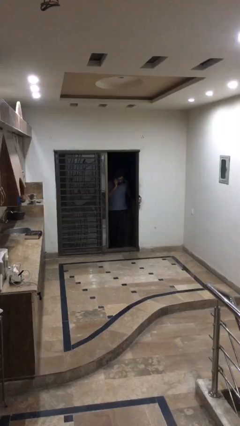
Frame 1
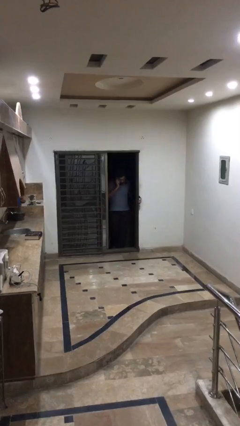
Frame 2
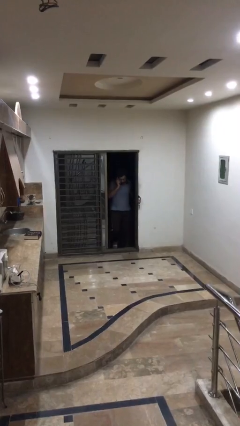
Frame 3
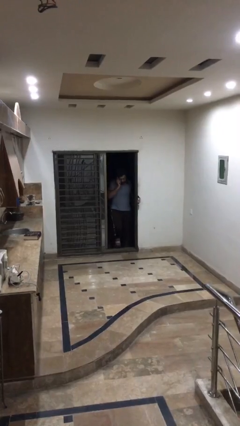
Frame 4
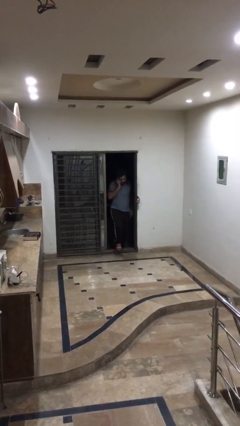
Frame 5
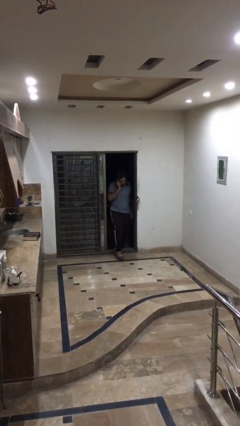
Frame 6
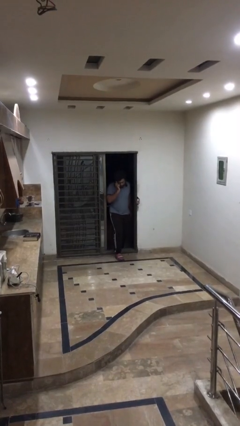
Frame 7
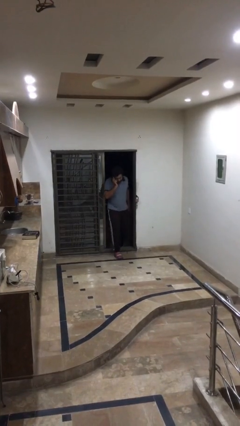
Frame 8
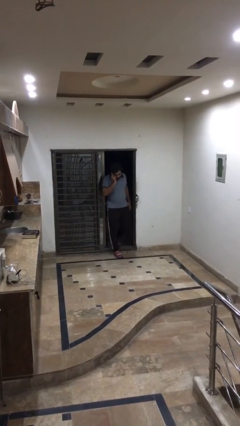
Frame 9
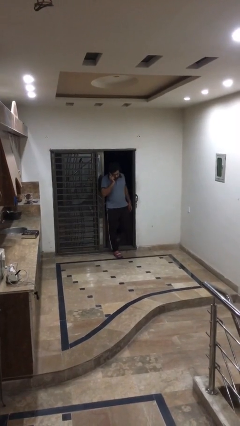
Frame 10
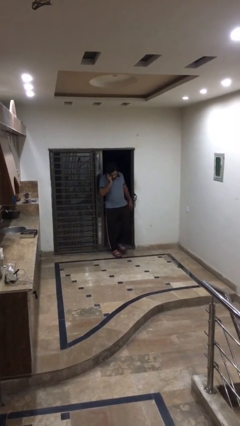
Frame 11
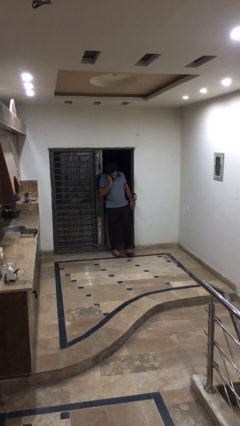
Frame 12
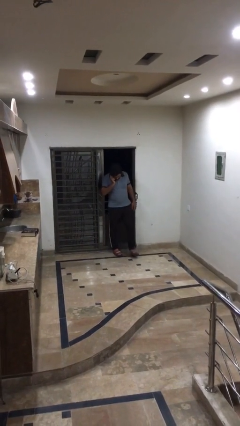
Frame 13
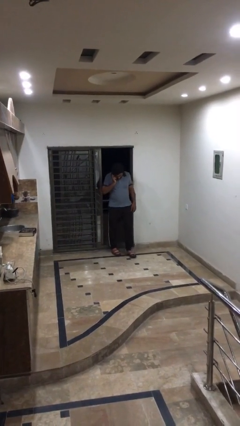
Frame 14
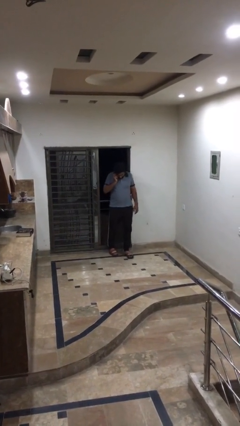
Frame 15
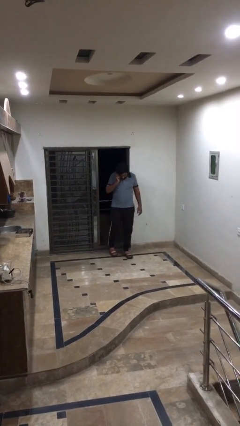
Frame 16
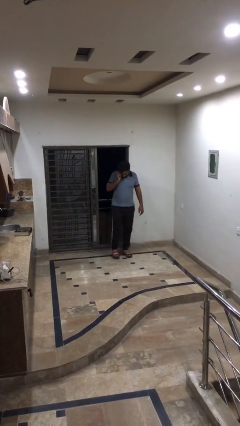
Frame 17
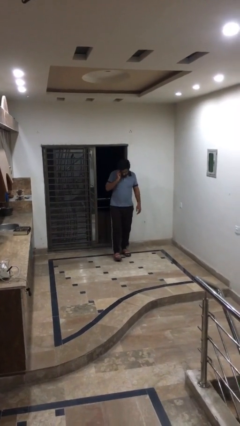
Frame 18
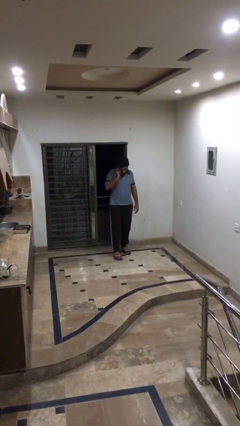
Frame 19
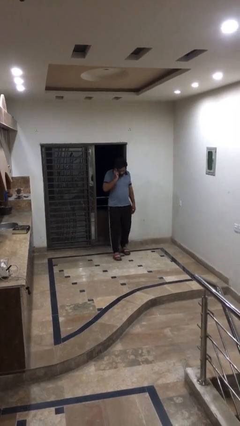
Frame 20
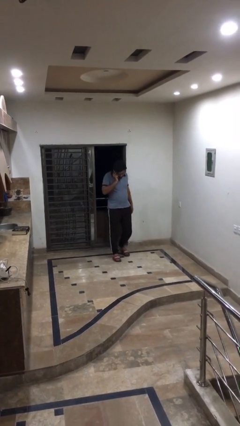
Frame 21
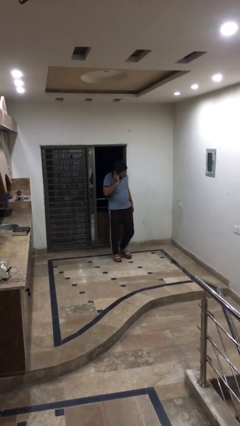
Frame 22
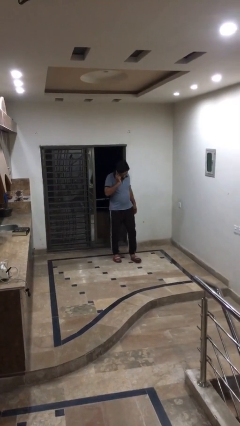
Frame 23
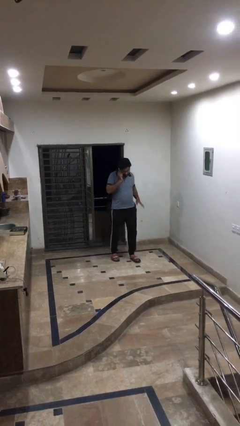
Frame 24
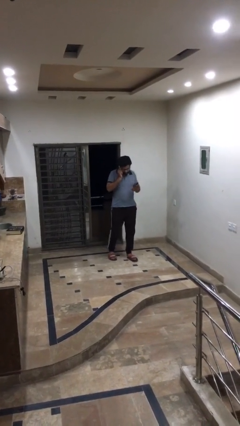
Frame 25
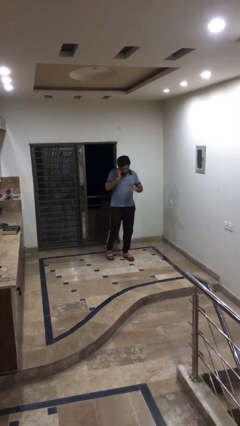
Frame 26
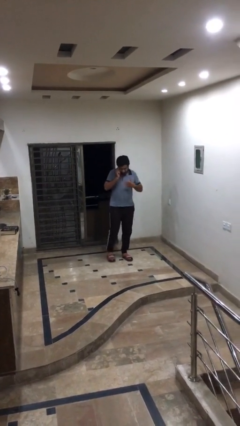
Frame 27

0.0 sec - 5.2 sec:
person enters scene through structure

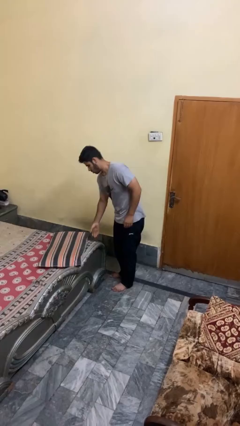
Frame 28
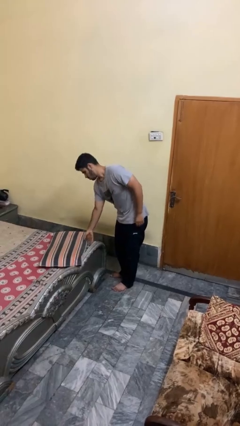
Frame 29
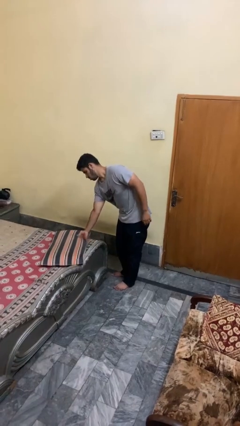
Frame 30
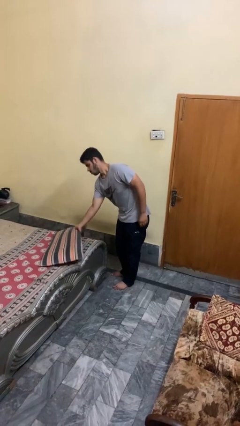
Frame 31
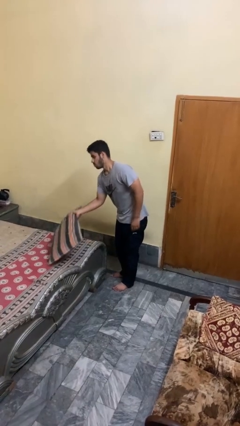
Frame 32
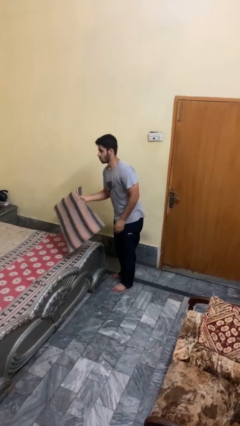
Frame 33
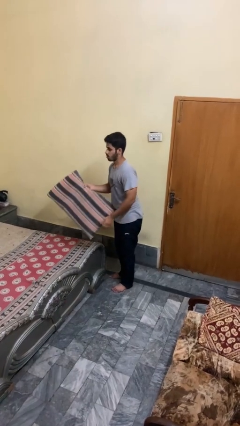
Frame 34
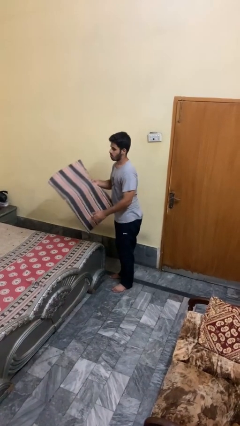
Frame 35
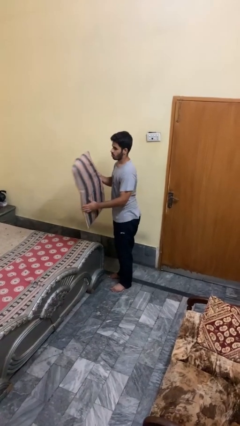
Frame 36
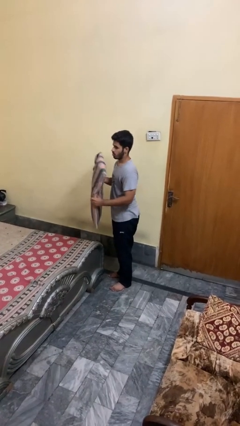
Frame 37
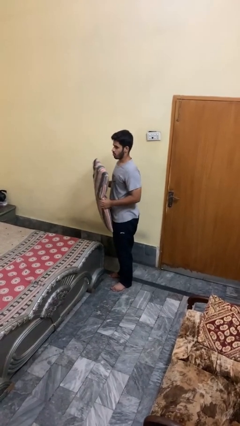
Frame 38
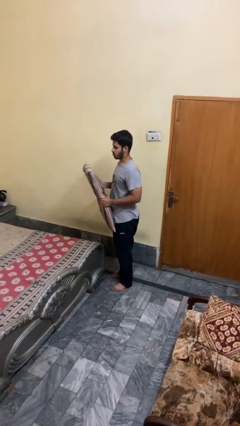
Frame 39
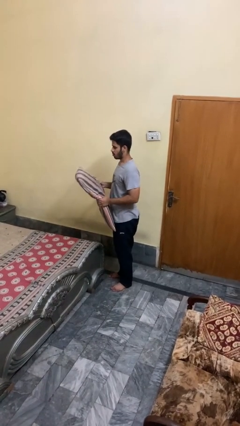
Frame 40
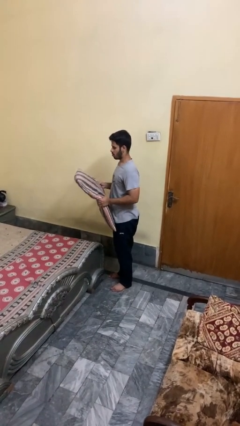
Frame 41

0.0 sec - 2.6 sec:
person picks up object from bed

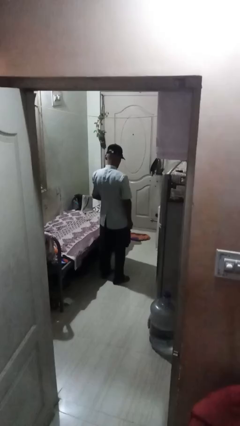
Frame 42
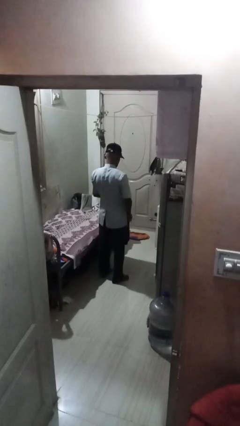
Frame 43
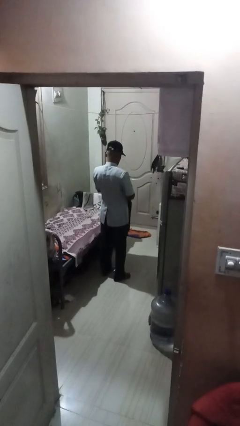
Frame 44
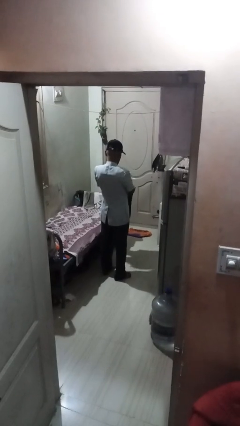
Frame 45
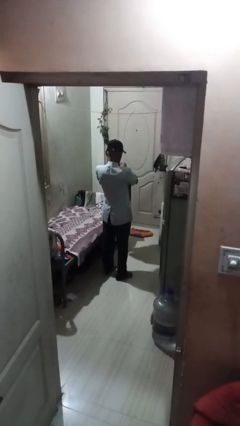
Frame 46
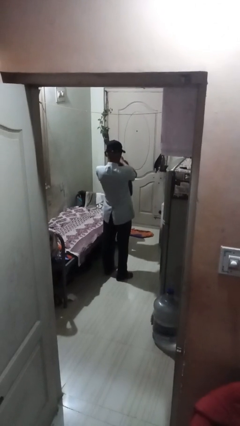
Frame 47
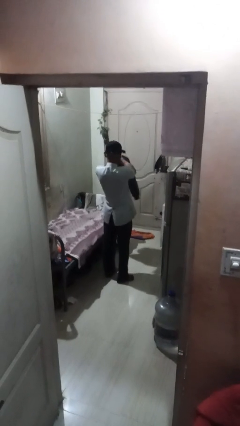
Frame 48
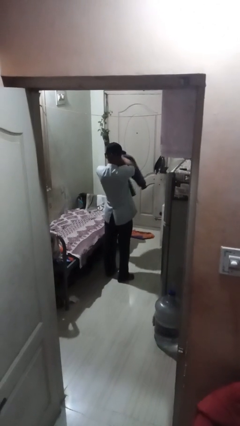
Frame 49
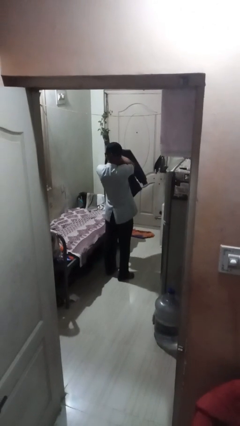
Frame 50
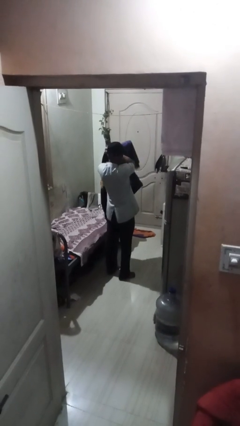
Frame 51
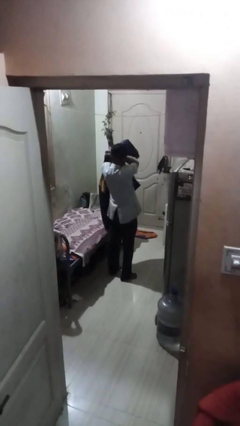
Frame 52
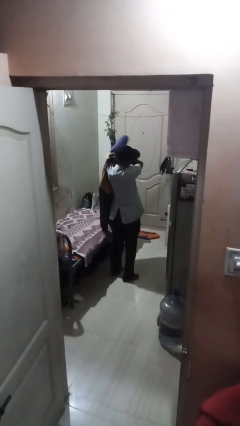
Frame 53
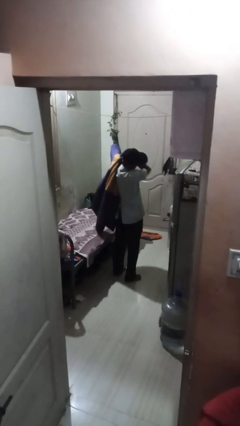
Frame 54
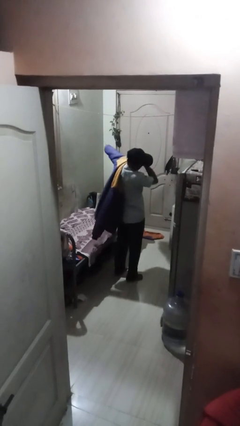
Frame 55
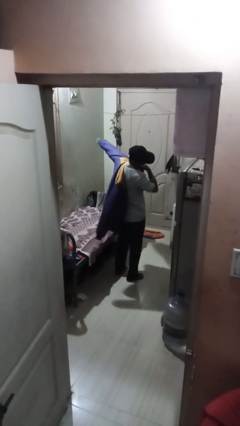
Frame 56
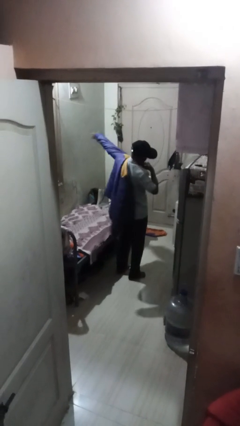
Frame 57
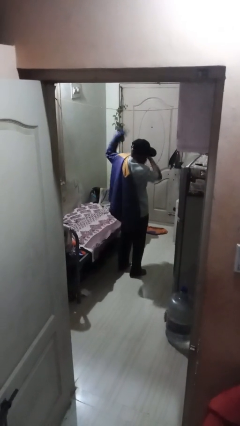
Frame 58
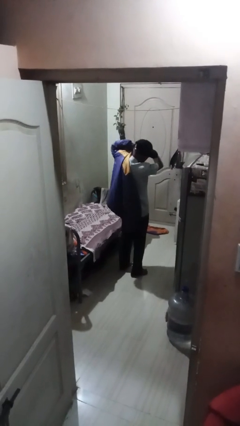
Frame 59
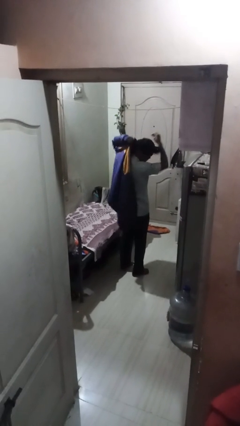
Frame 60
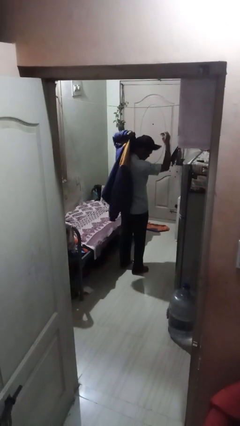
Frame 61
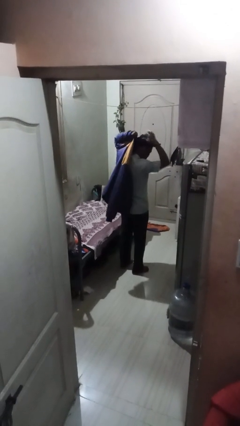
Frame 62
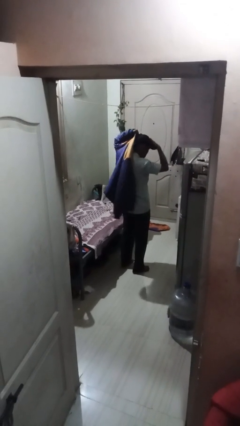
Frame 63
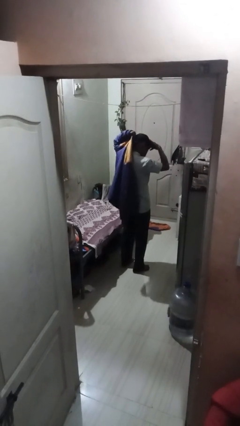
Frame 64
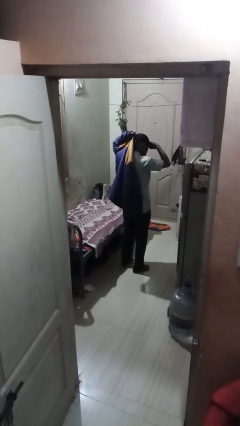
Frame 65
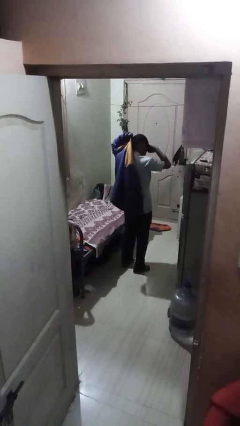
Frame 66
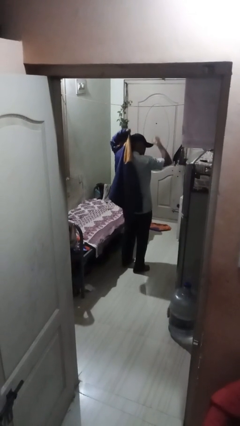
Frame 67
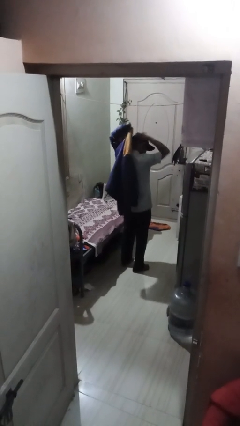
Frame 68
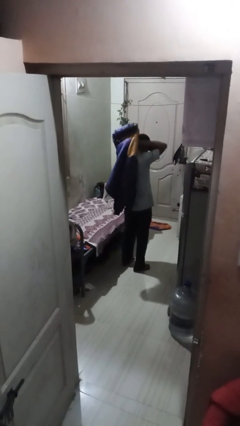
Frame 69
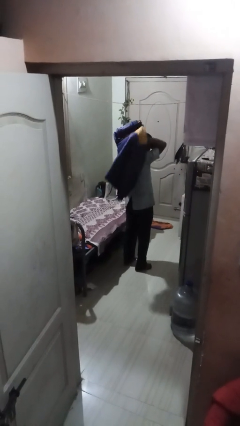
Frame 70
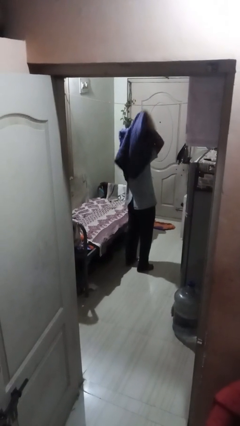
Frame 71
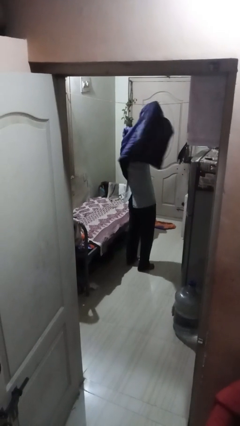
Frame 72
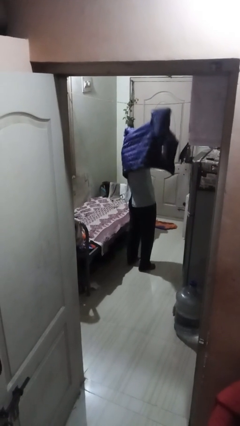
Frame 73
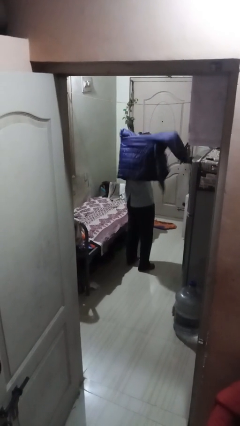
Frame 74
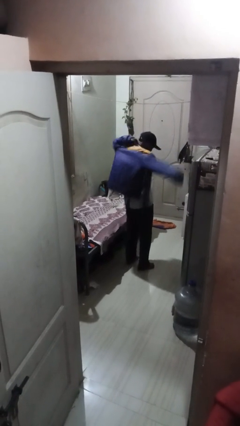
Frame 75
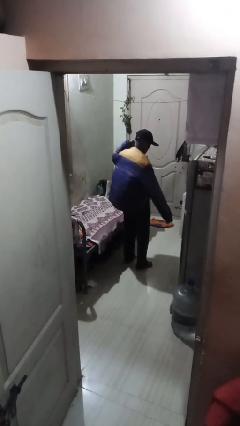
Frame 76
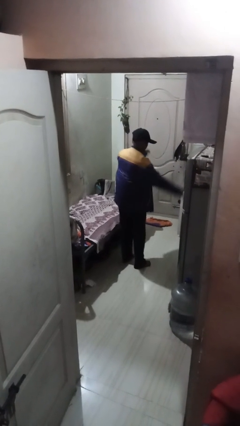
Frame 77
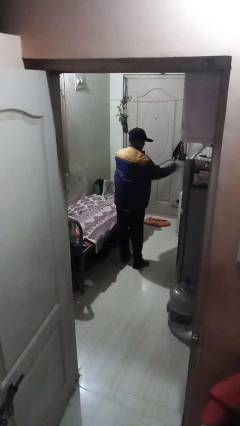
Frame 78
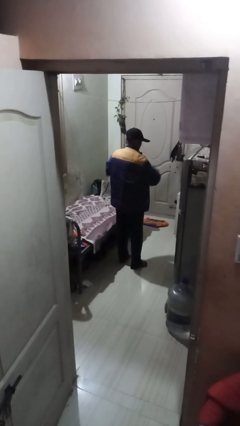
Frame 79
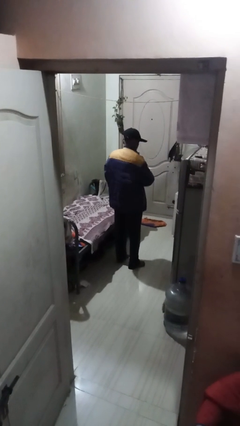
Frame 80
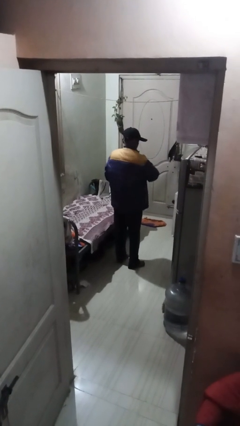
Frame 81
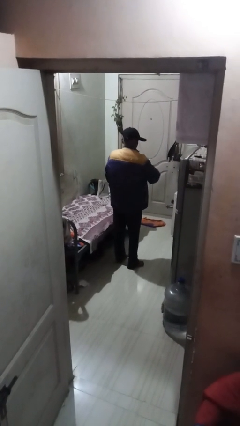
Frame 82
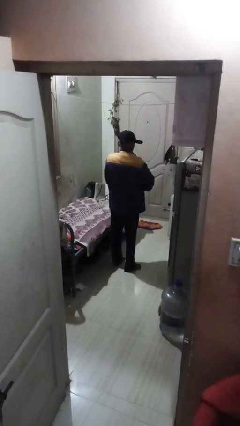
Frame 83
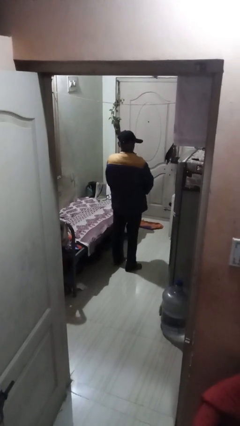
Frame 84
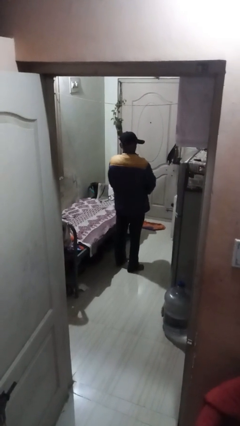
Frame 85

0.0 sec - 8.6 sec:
person puts on jacket

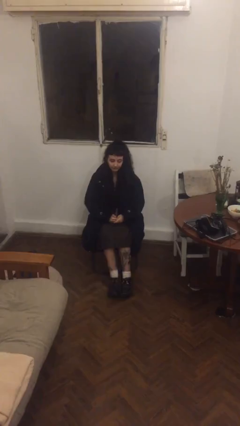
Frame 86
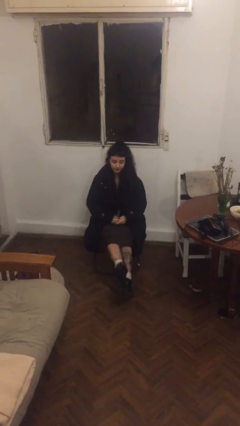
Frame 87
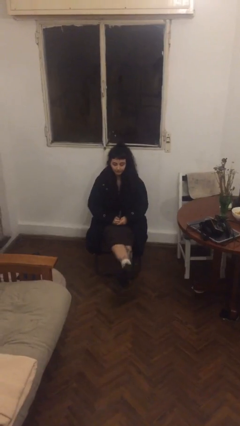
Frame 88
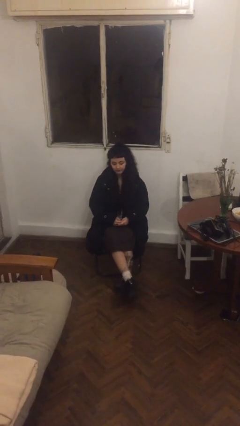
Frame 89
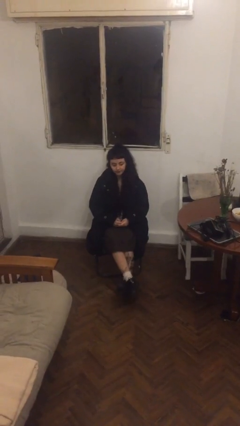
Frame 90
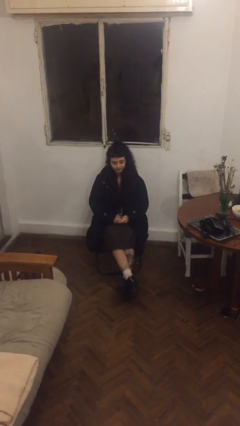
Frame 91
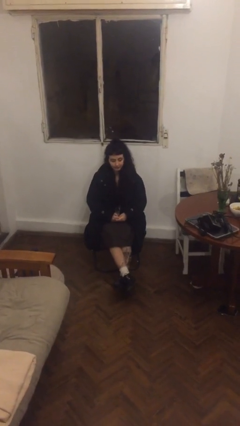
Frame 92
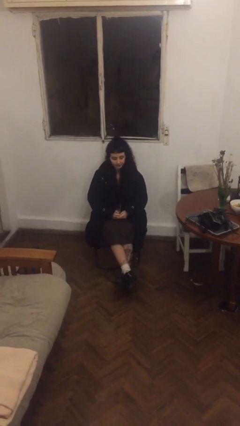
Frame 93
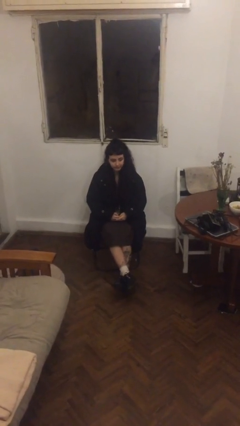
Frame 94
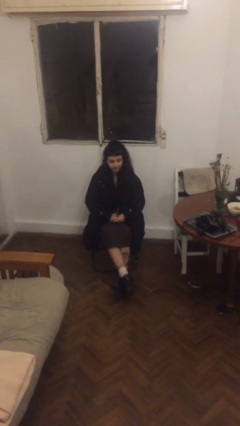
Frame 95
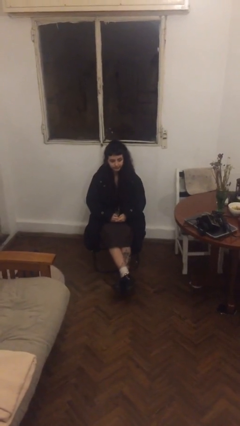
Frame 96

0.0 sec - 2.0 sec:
person crosses legs
